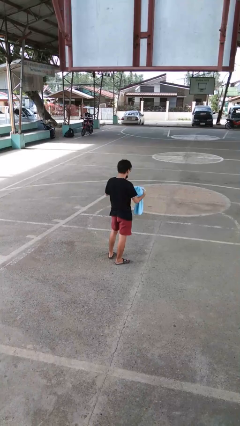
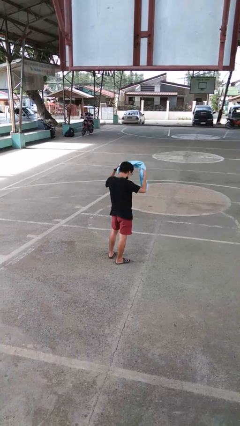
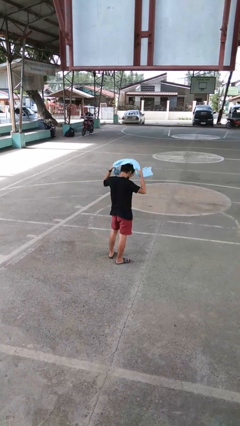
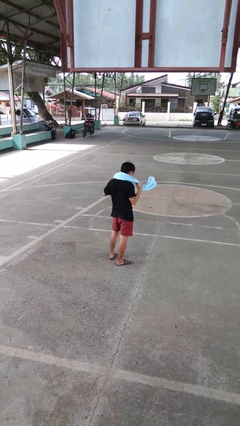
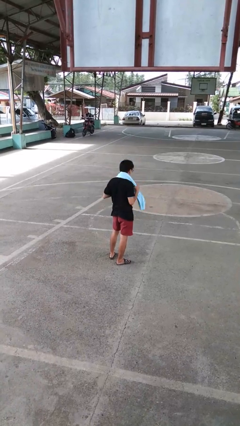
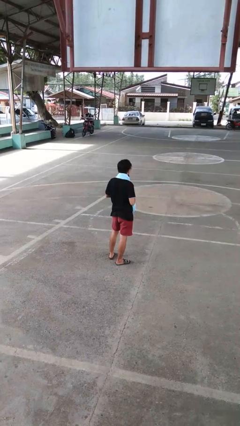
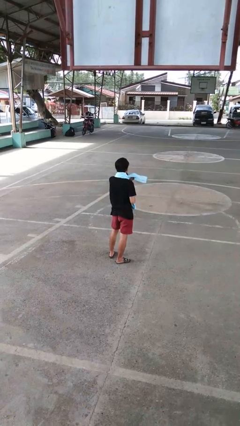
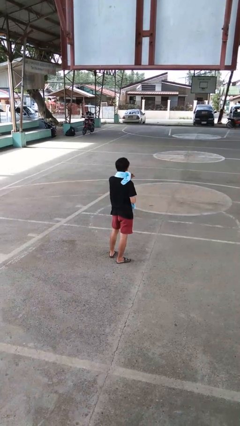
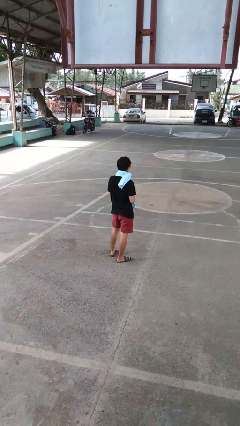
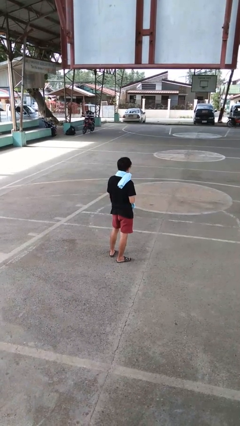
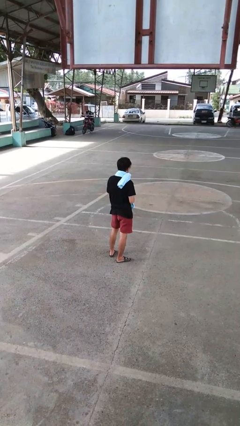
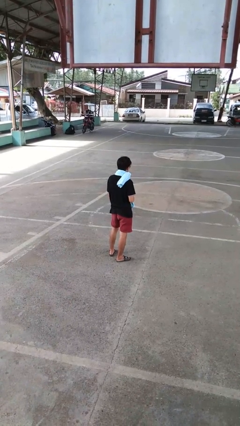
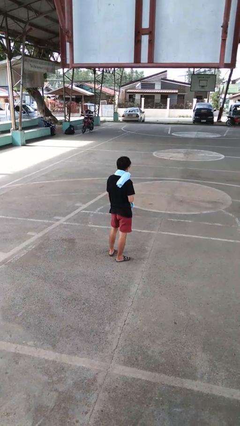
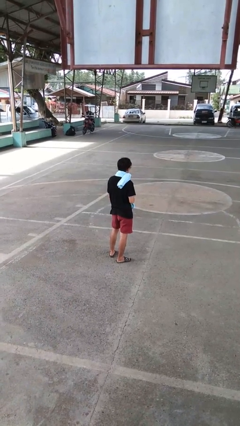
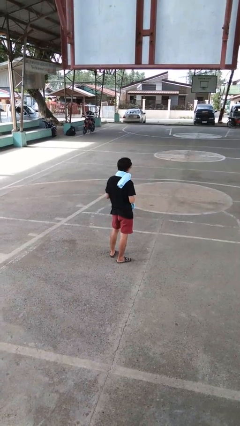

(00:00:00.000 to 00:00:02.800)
person puts on scarf

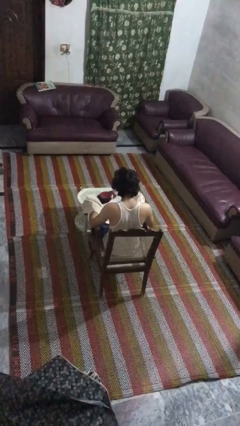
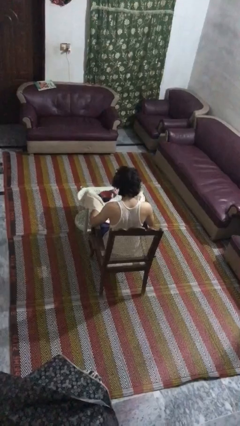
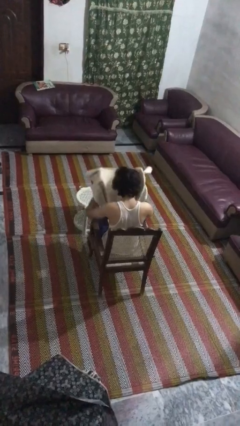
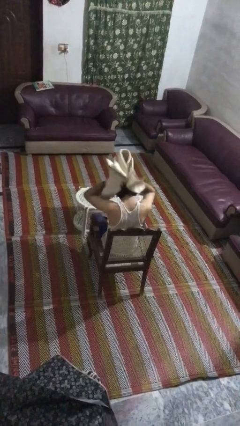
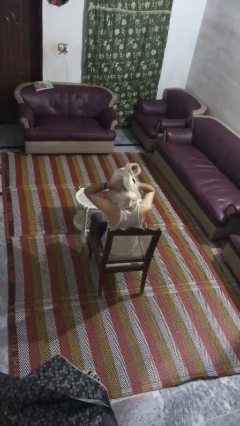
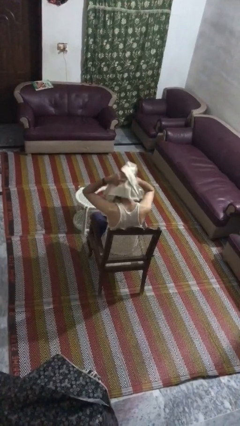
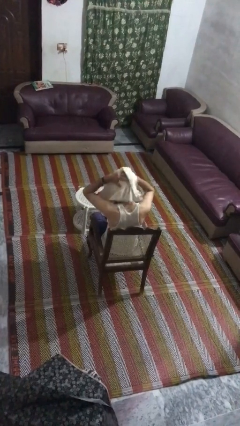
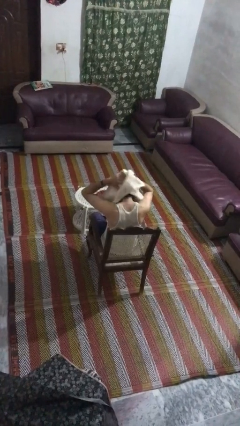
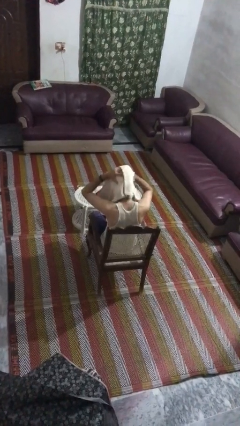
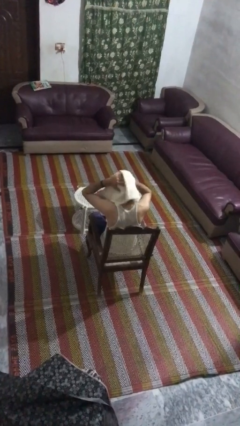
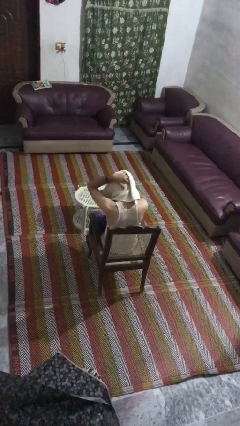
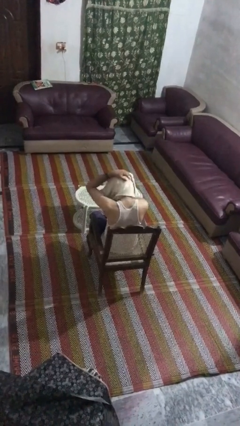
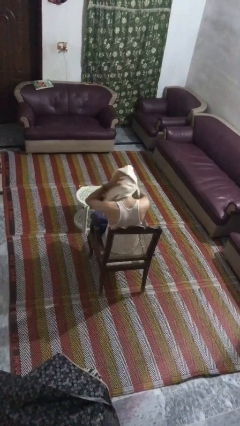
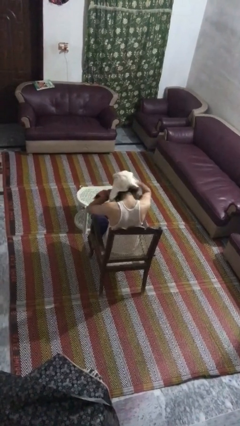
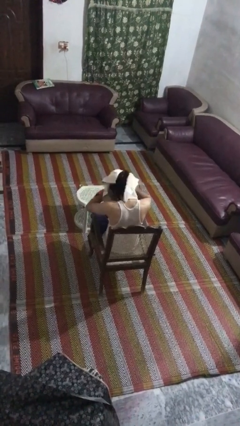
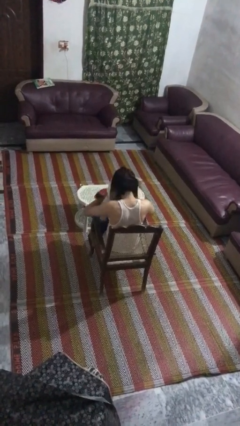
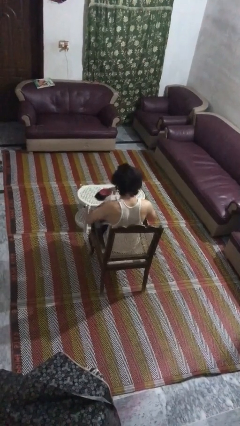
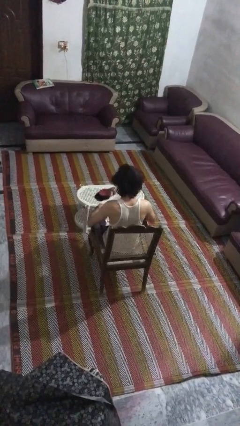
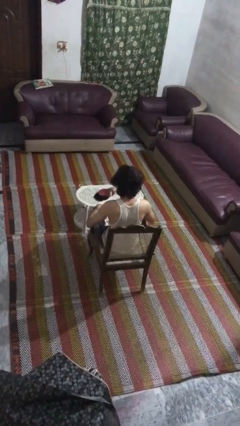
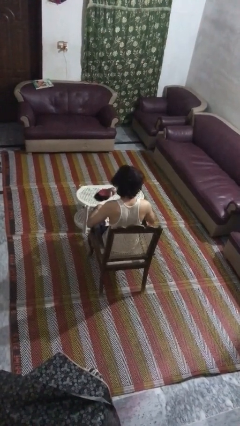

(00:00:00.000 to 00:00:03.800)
person dries hair with towel

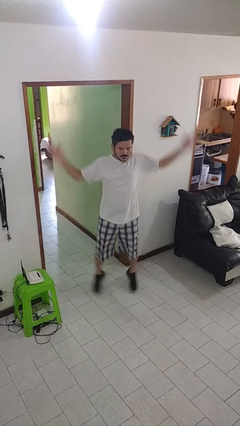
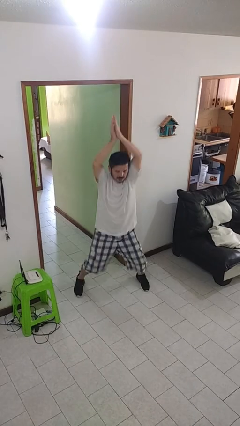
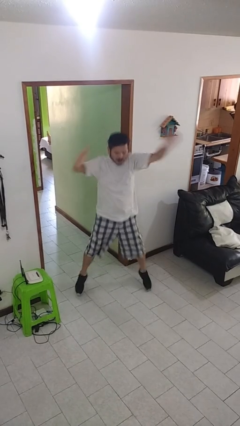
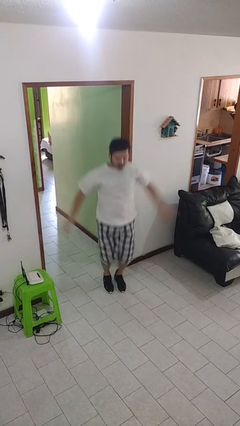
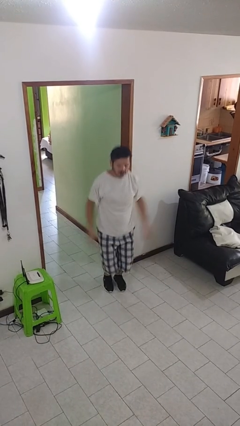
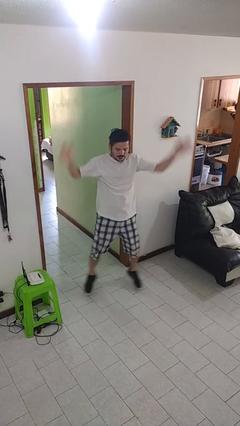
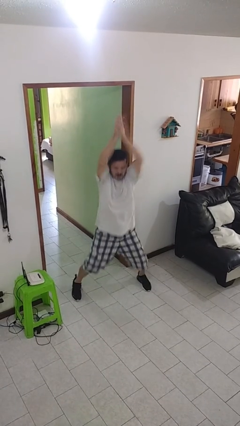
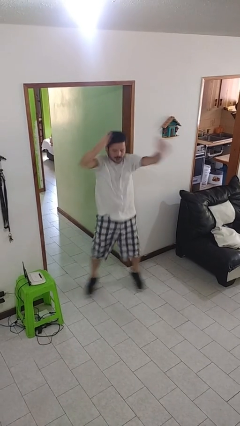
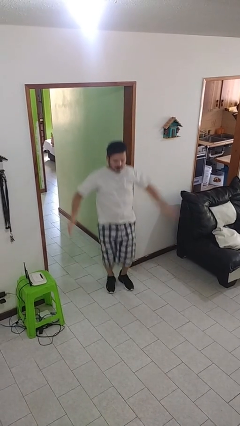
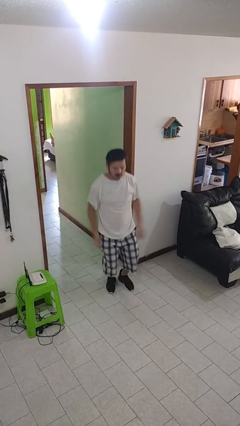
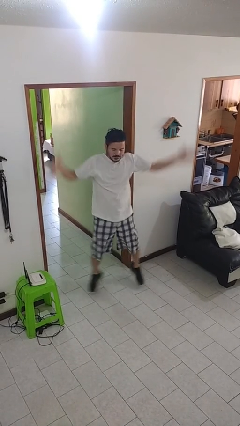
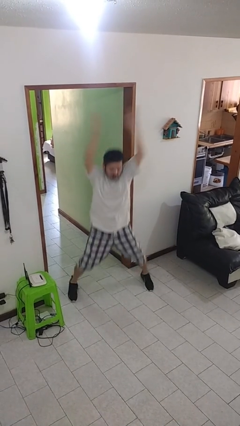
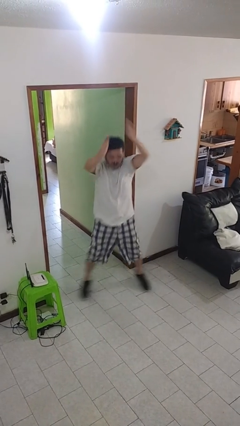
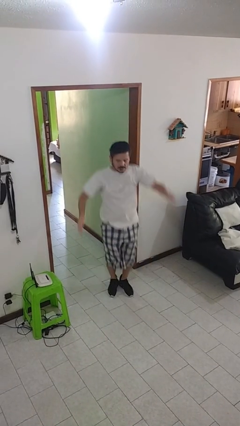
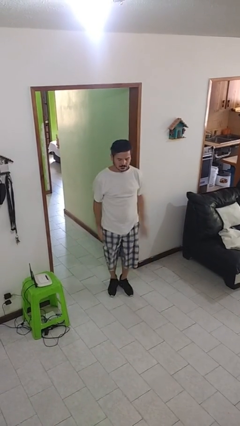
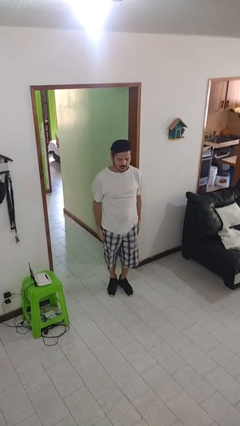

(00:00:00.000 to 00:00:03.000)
person exercises with jumping jacks

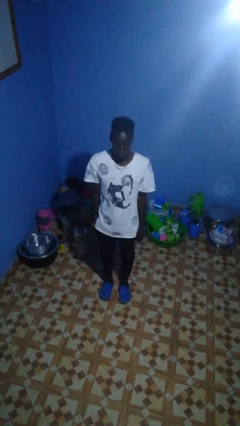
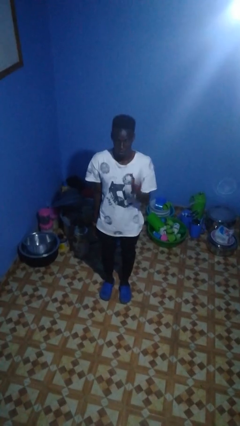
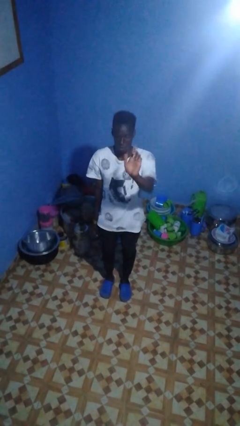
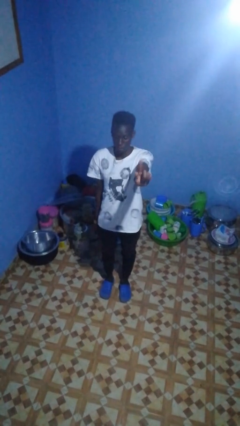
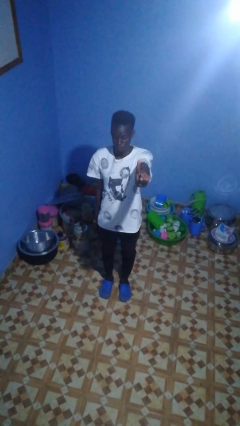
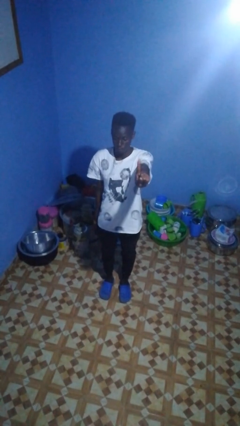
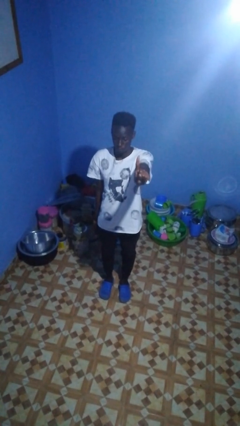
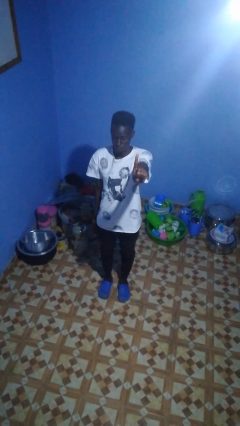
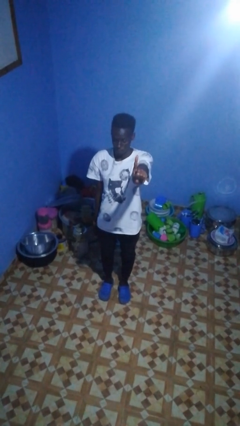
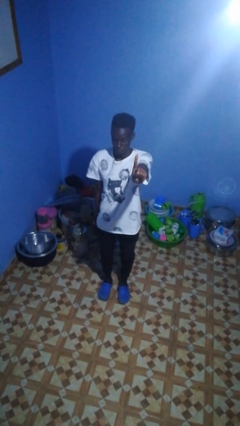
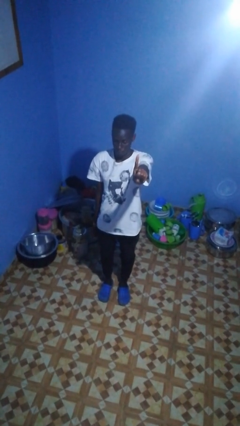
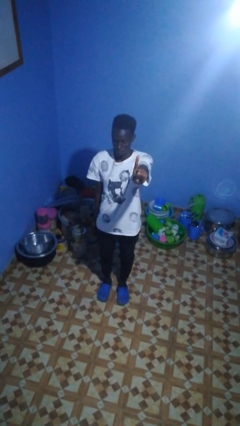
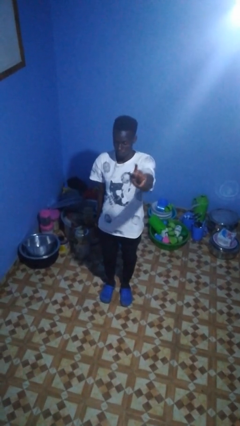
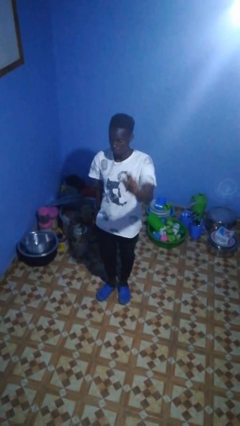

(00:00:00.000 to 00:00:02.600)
person gestures number one

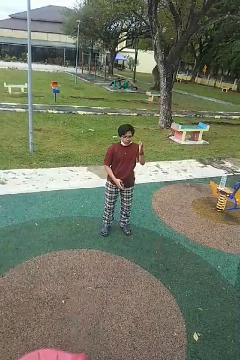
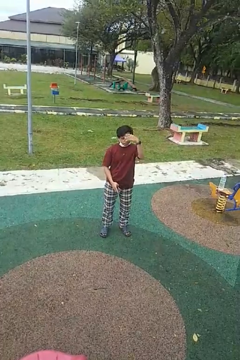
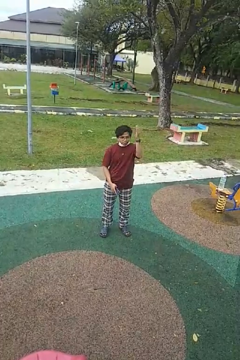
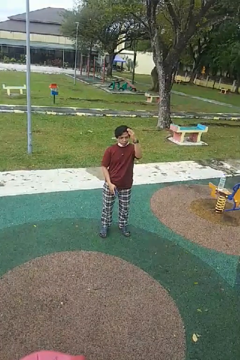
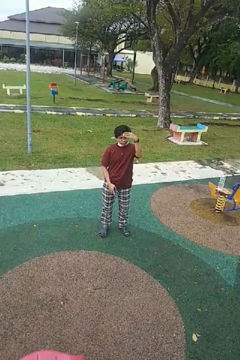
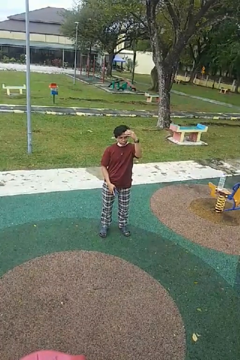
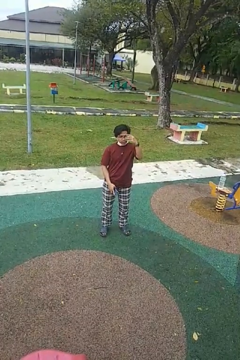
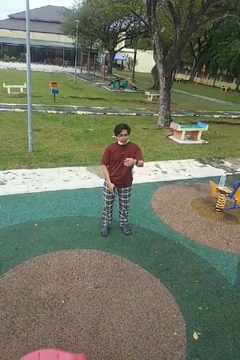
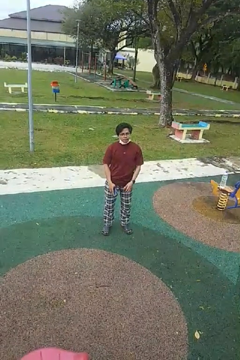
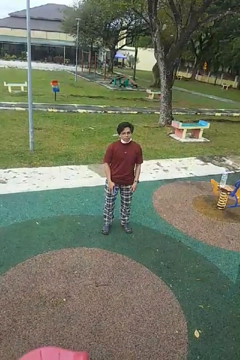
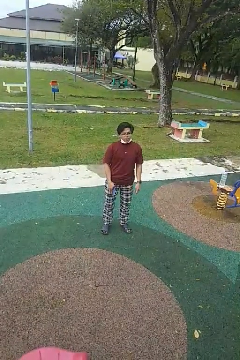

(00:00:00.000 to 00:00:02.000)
person gestures come here

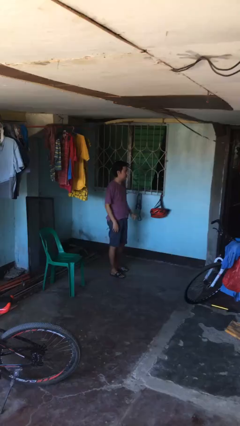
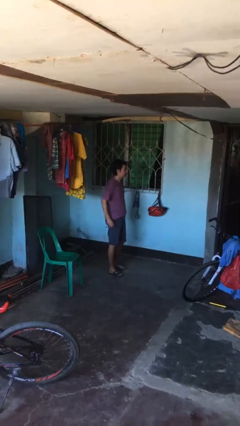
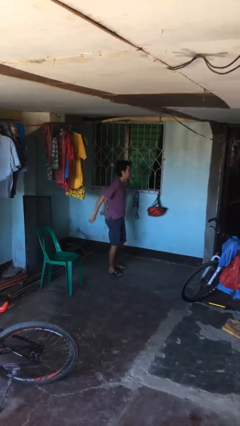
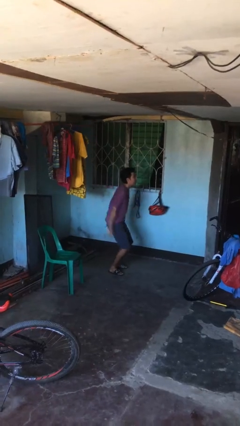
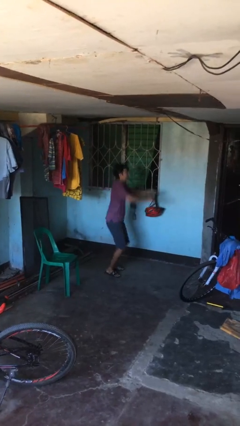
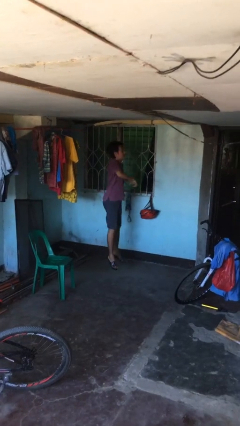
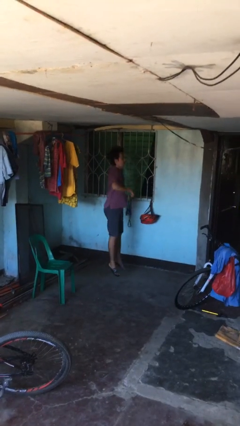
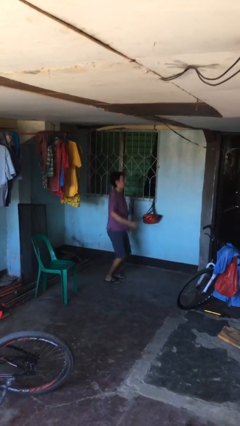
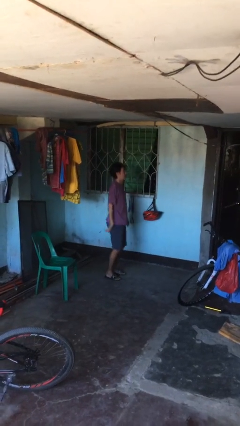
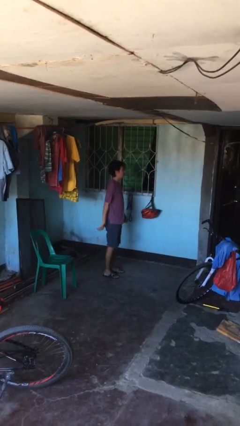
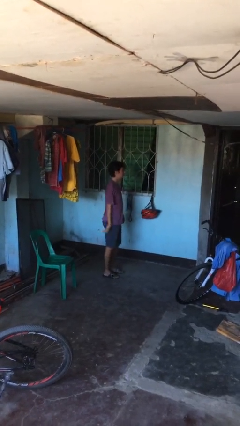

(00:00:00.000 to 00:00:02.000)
person jumps

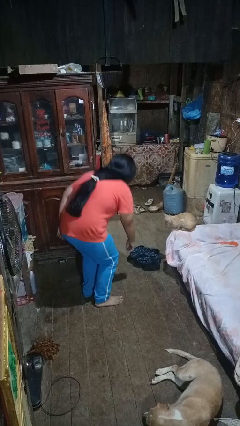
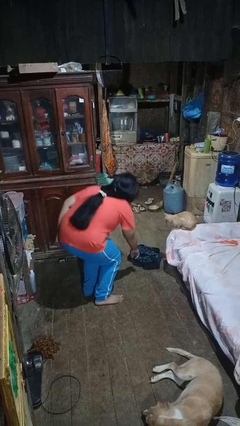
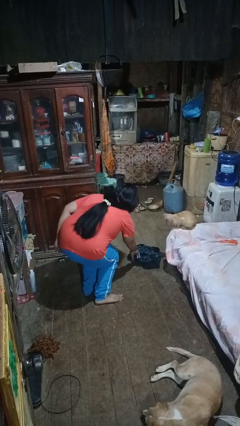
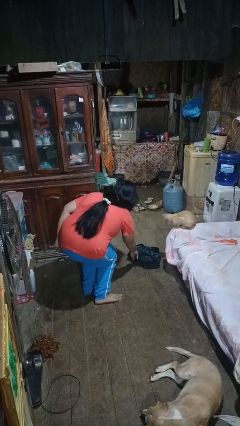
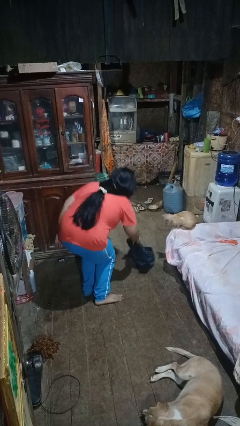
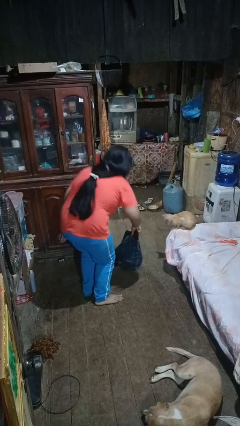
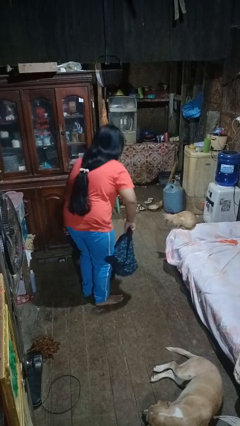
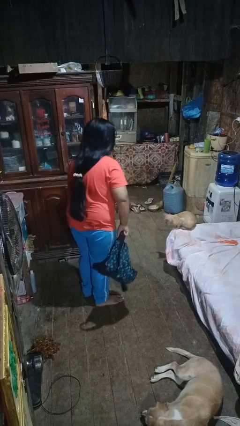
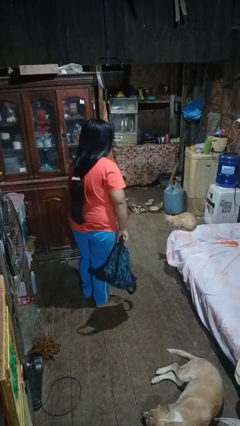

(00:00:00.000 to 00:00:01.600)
person picks up object from floor
